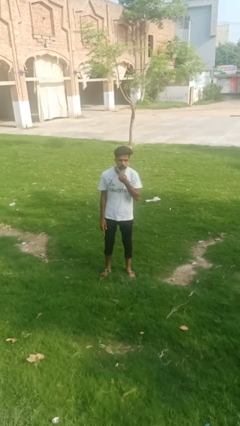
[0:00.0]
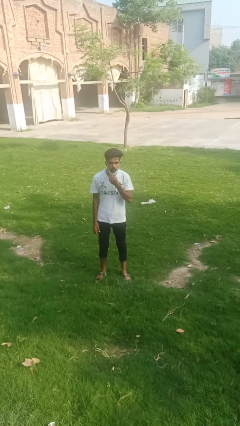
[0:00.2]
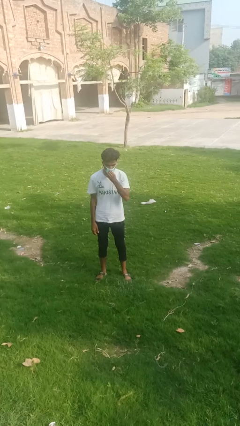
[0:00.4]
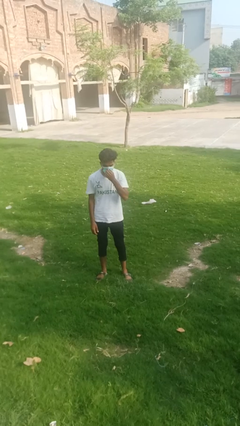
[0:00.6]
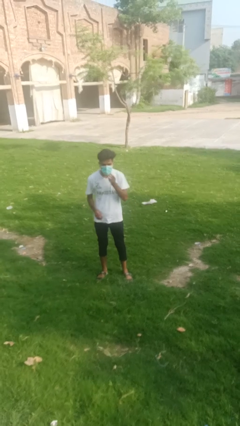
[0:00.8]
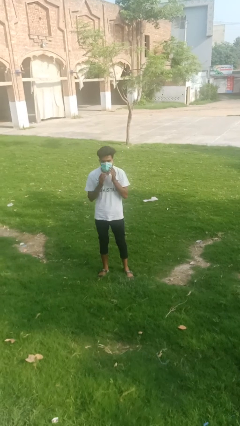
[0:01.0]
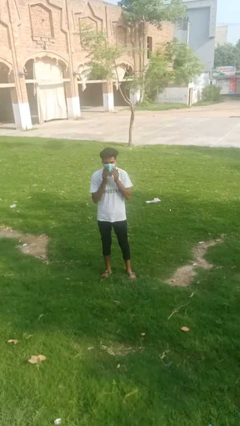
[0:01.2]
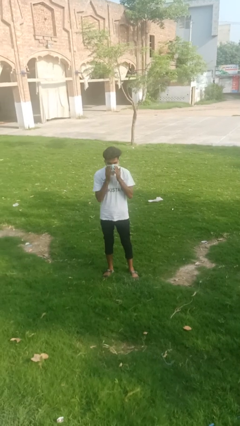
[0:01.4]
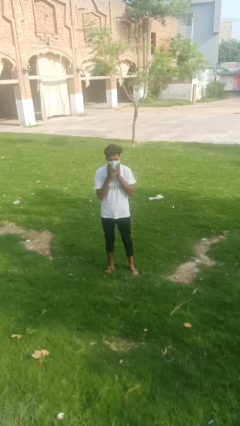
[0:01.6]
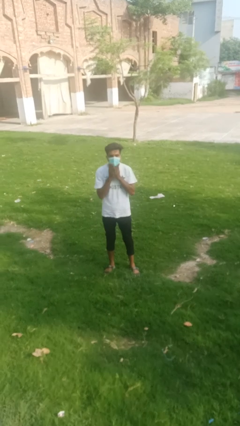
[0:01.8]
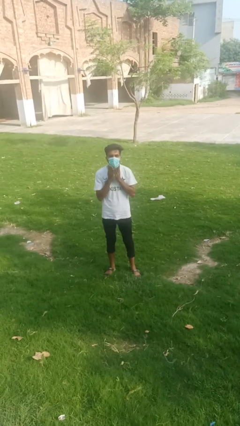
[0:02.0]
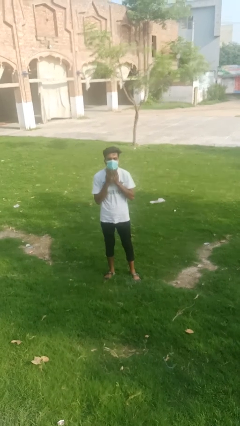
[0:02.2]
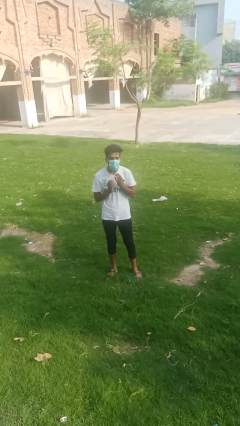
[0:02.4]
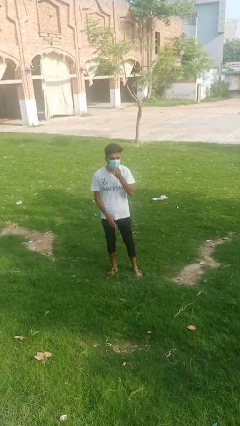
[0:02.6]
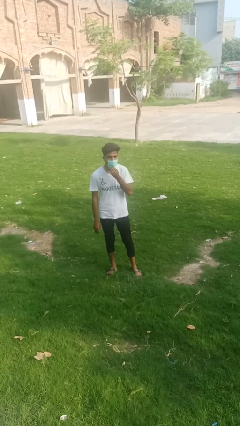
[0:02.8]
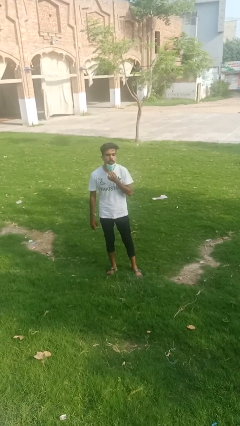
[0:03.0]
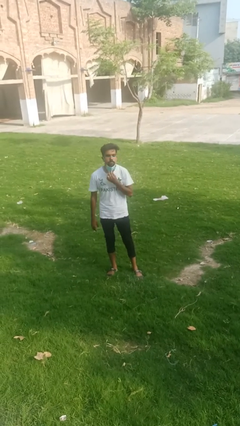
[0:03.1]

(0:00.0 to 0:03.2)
person puts on facemask

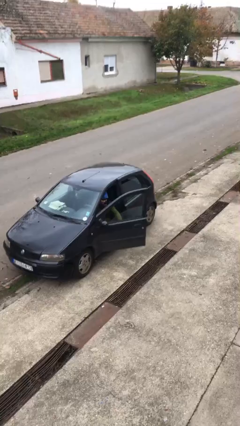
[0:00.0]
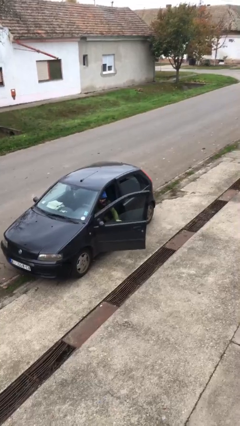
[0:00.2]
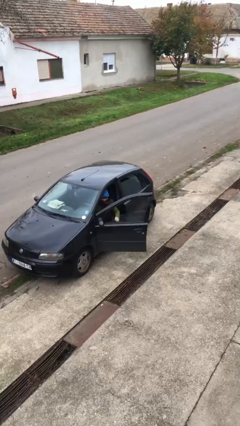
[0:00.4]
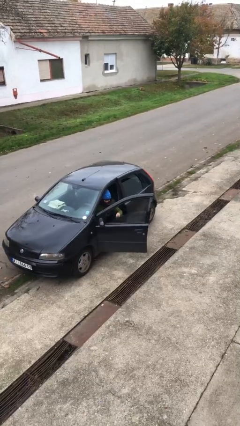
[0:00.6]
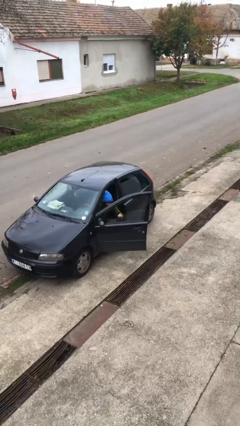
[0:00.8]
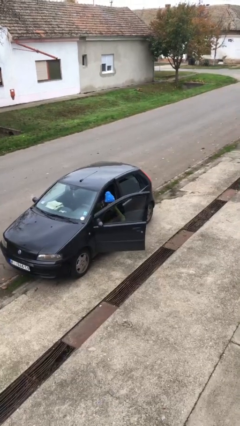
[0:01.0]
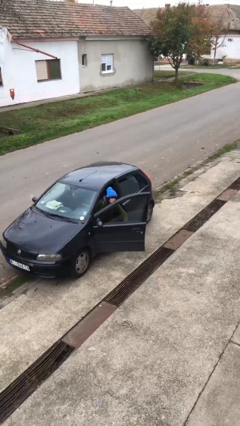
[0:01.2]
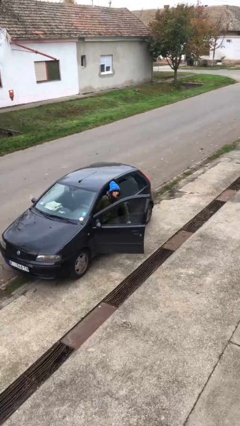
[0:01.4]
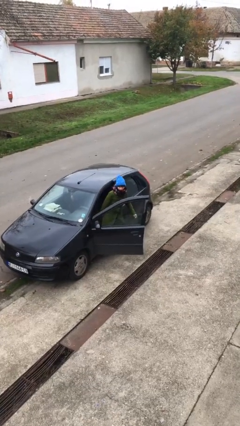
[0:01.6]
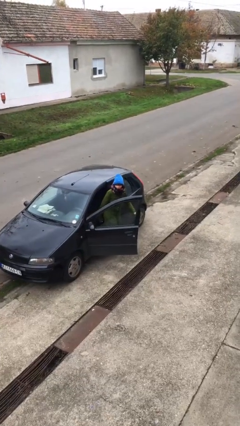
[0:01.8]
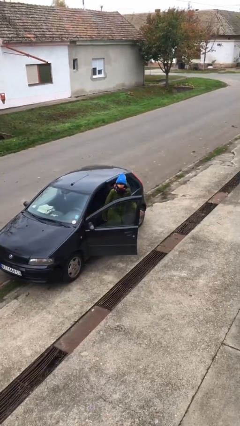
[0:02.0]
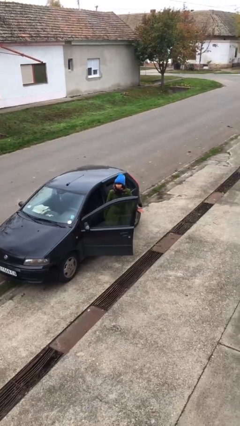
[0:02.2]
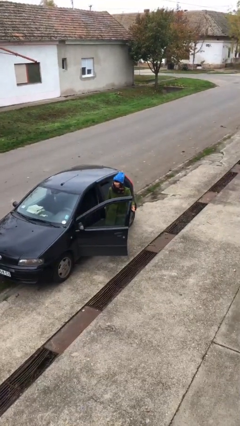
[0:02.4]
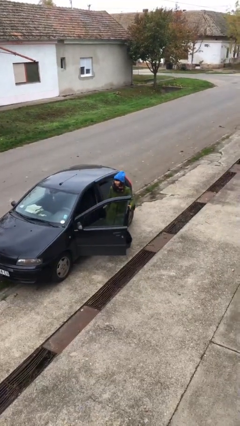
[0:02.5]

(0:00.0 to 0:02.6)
person exits car

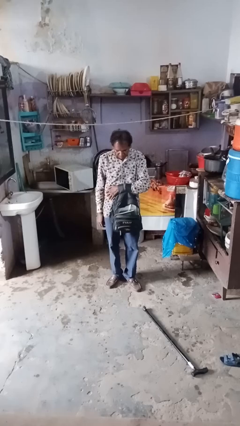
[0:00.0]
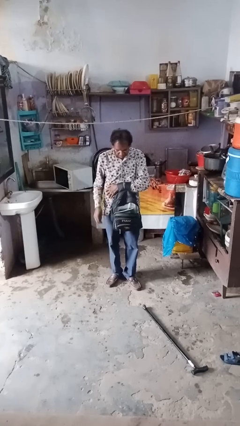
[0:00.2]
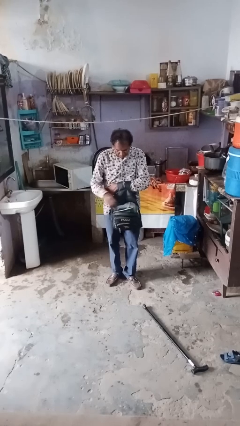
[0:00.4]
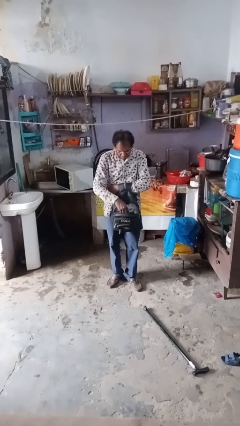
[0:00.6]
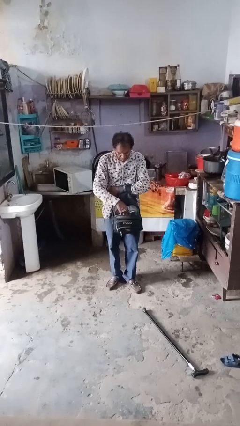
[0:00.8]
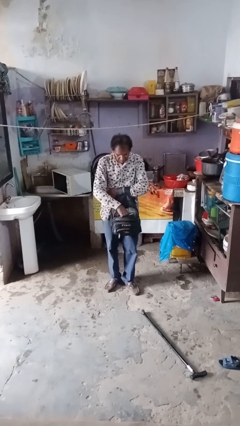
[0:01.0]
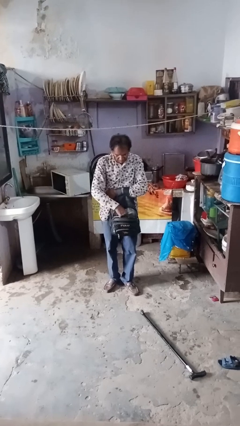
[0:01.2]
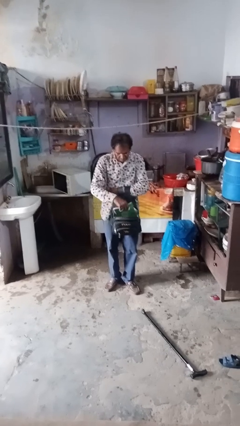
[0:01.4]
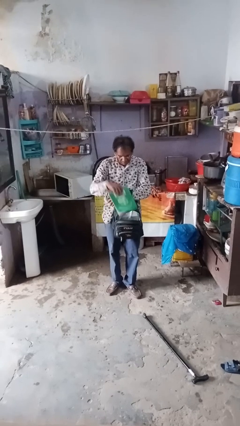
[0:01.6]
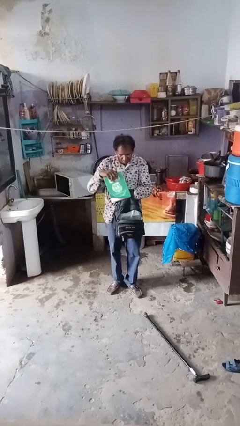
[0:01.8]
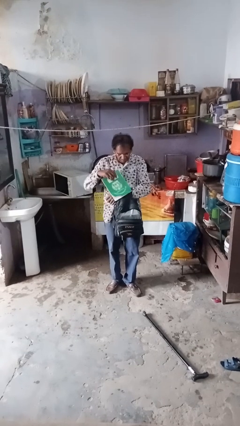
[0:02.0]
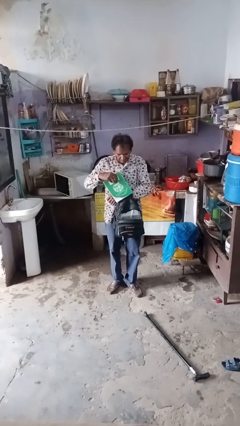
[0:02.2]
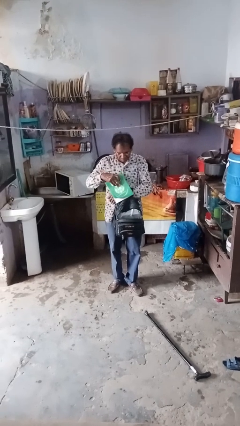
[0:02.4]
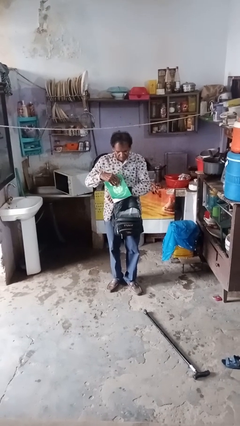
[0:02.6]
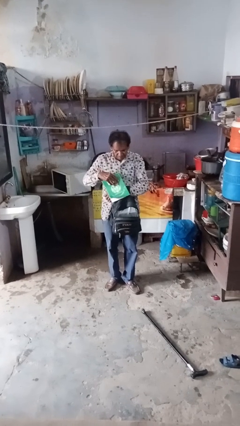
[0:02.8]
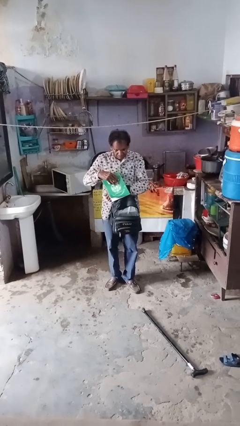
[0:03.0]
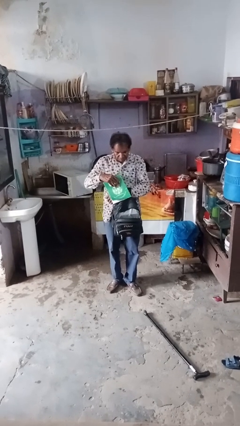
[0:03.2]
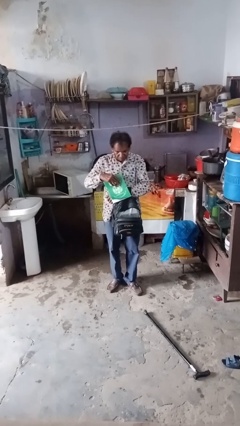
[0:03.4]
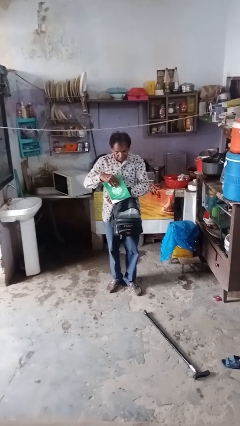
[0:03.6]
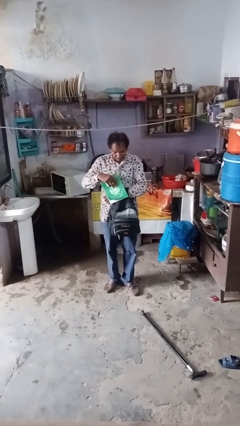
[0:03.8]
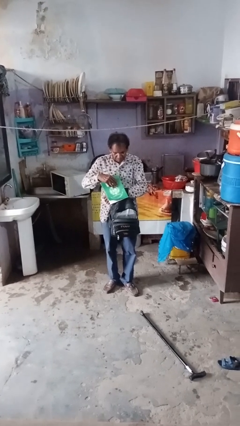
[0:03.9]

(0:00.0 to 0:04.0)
person takes object from bag

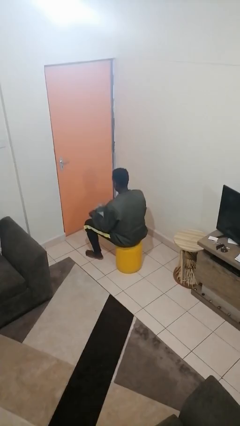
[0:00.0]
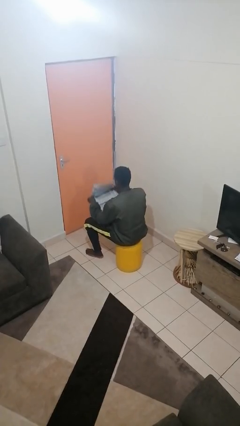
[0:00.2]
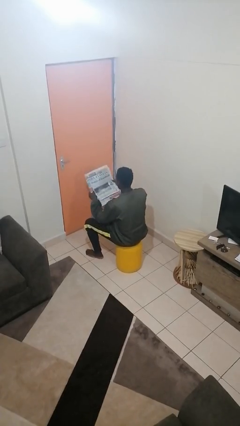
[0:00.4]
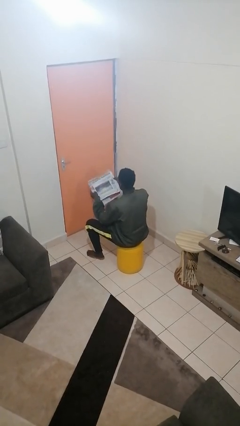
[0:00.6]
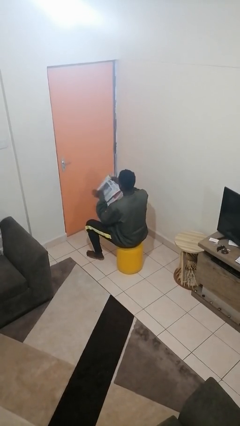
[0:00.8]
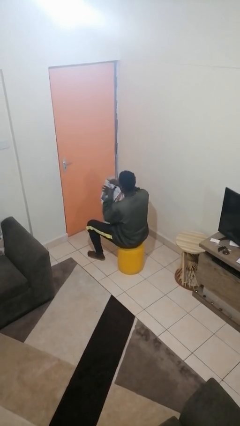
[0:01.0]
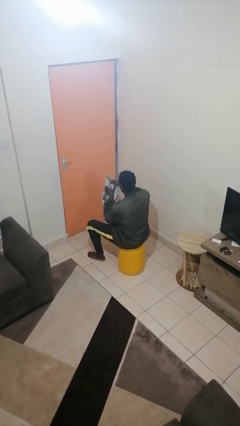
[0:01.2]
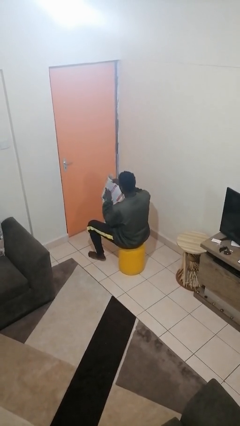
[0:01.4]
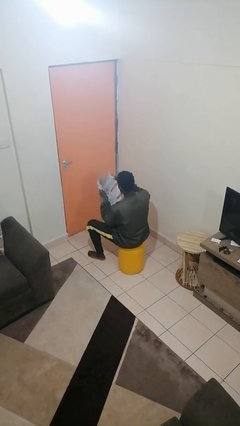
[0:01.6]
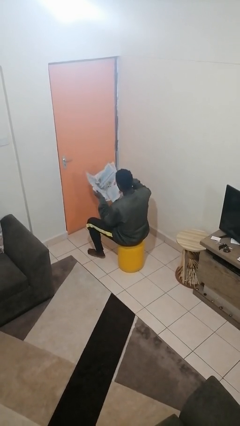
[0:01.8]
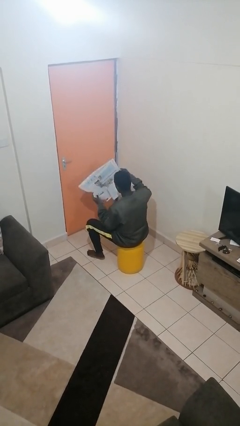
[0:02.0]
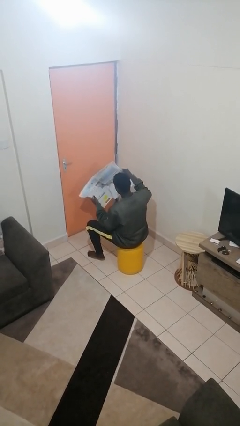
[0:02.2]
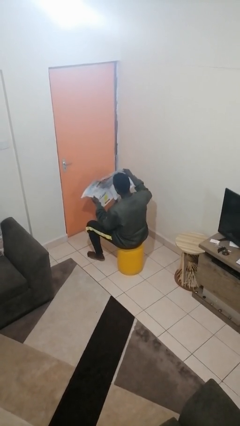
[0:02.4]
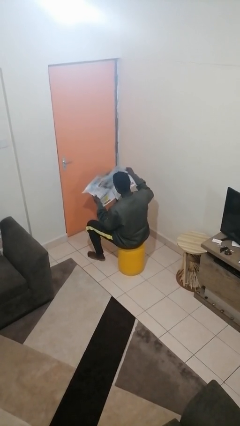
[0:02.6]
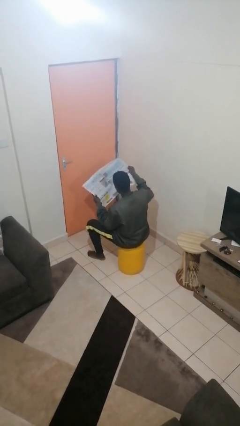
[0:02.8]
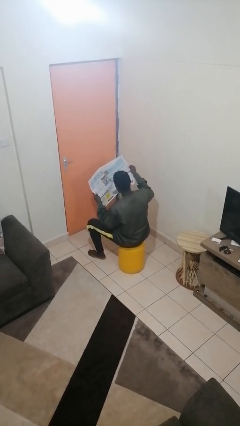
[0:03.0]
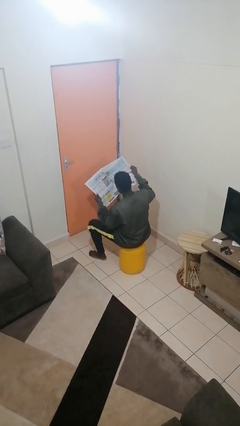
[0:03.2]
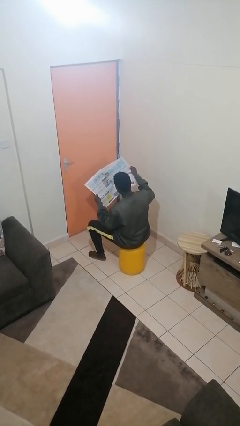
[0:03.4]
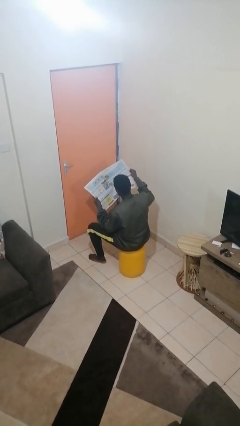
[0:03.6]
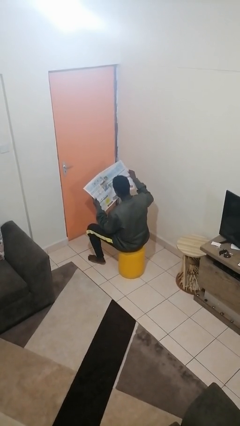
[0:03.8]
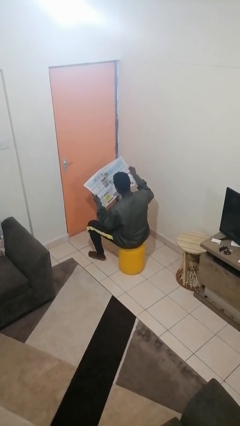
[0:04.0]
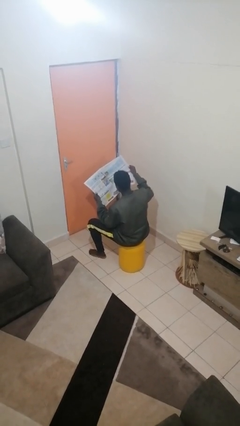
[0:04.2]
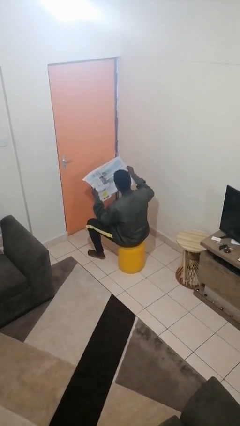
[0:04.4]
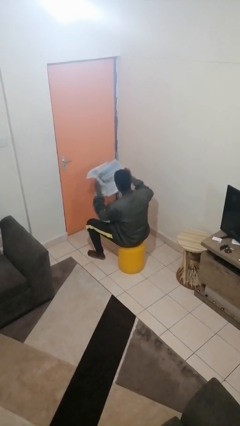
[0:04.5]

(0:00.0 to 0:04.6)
person reads newspaper

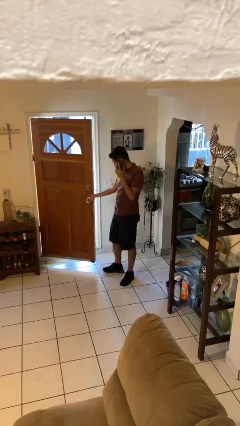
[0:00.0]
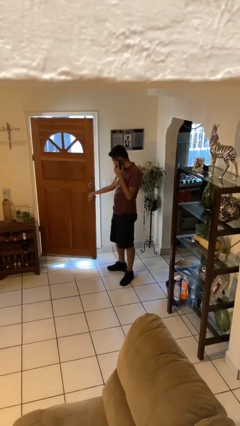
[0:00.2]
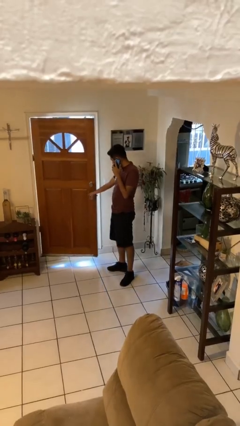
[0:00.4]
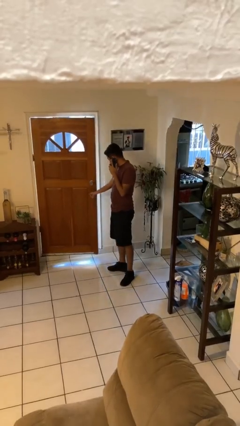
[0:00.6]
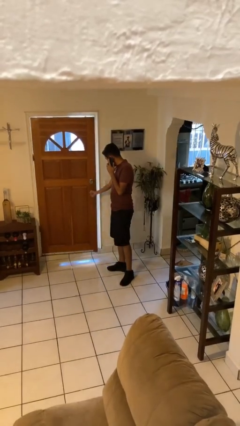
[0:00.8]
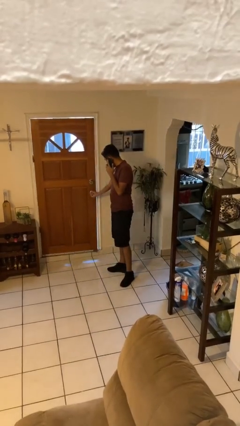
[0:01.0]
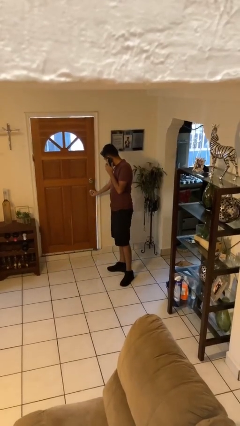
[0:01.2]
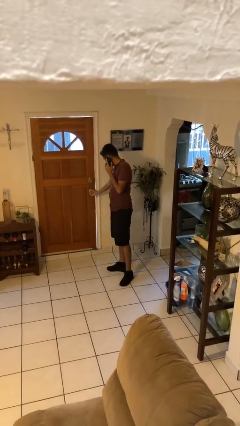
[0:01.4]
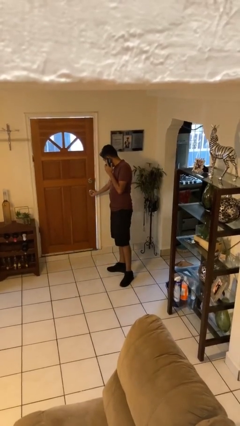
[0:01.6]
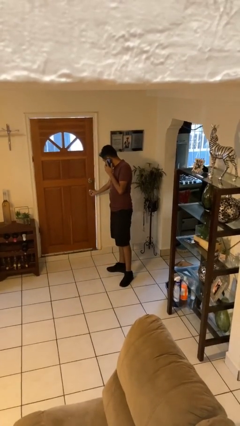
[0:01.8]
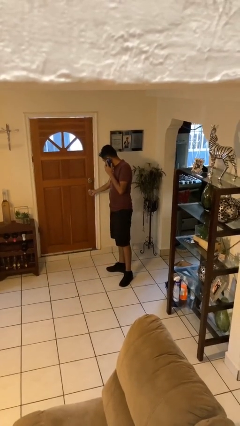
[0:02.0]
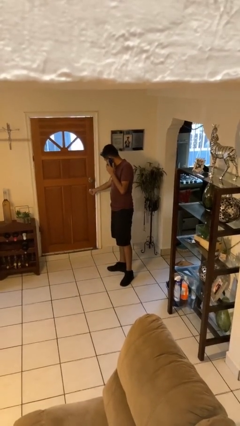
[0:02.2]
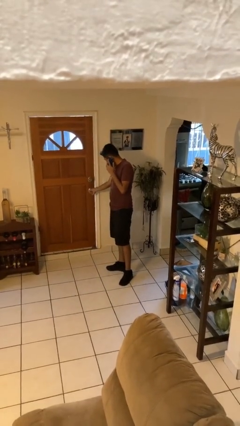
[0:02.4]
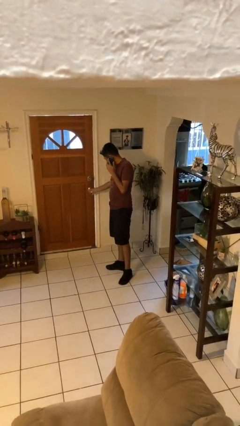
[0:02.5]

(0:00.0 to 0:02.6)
person closes facility door
